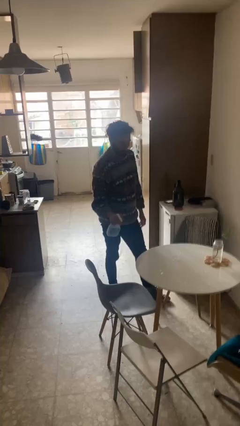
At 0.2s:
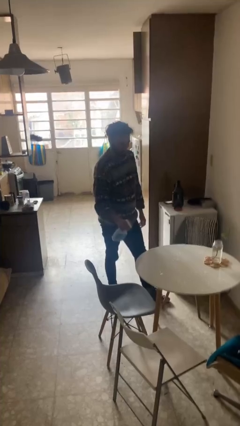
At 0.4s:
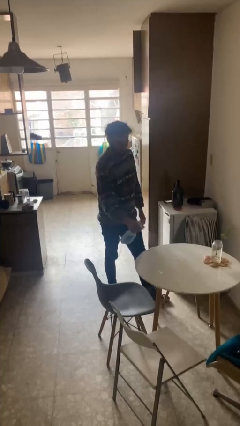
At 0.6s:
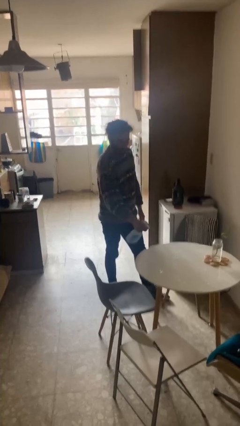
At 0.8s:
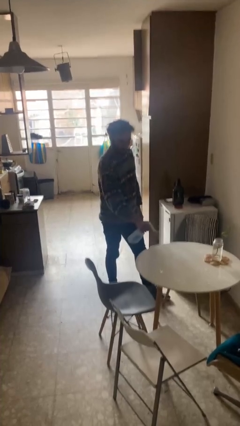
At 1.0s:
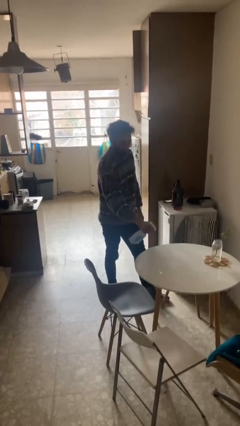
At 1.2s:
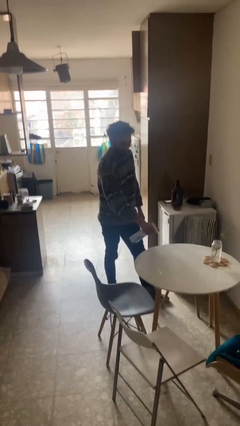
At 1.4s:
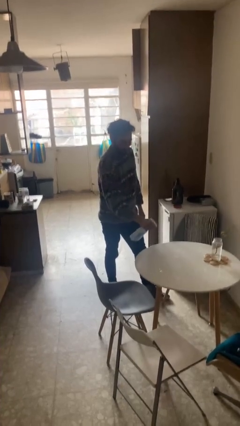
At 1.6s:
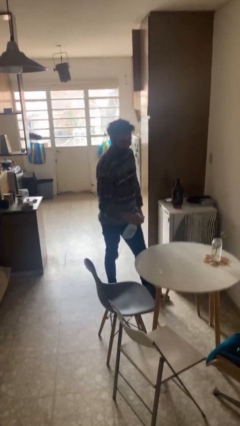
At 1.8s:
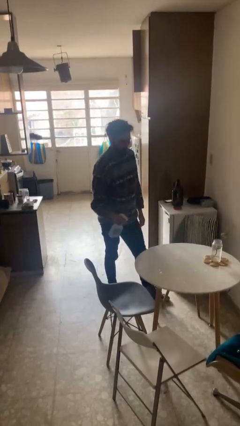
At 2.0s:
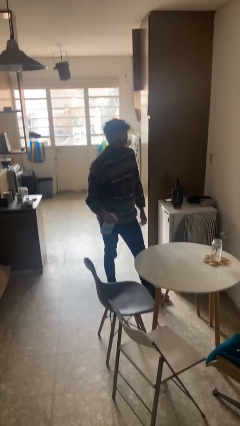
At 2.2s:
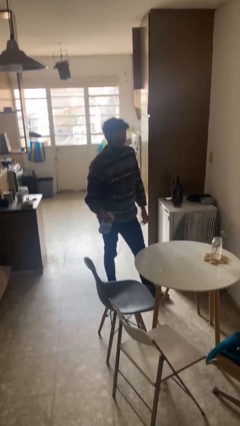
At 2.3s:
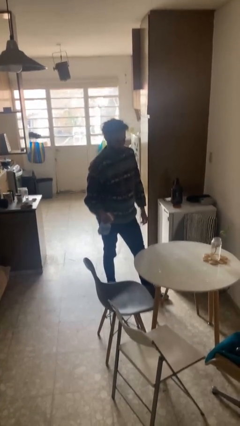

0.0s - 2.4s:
person sprays from bottle

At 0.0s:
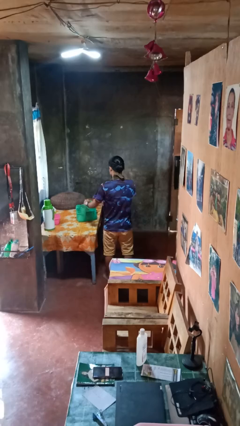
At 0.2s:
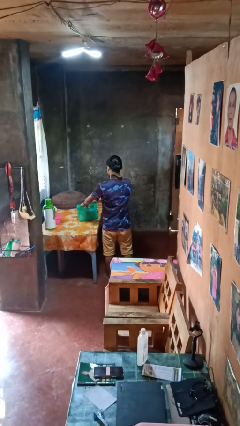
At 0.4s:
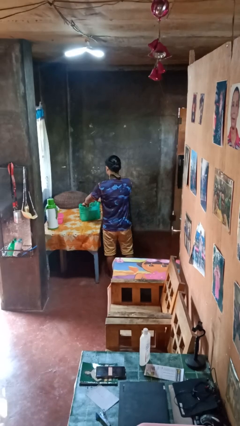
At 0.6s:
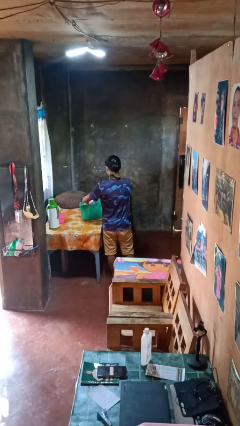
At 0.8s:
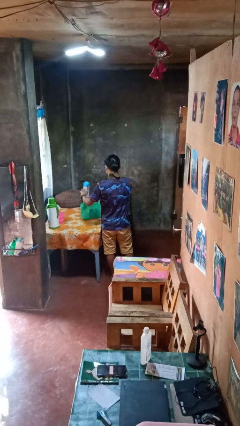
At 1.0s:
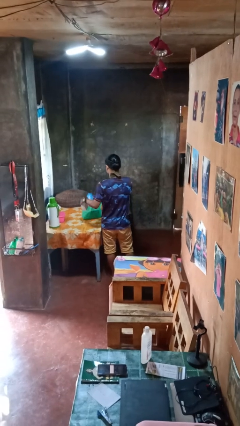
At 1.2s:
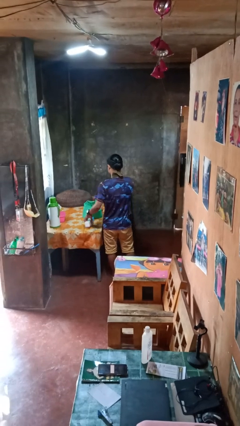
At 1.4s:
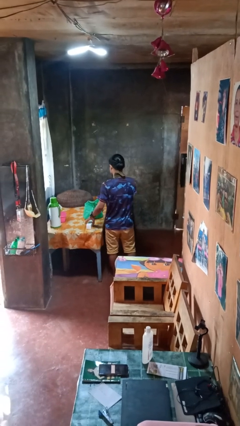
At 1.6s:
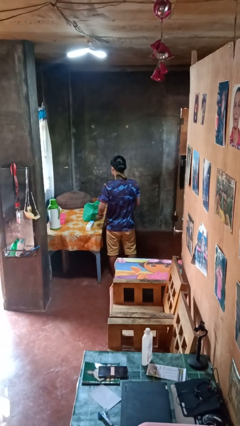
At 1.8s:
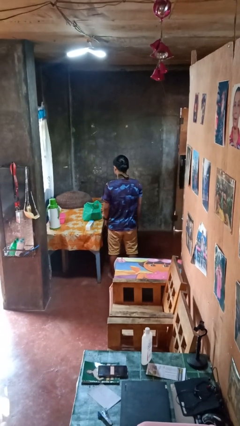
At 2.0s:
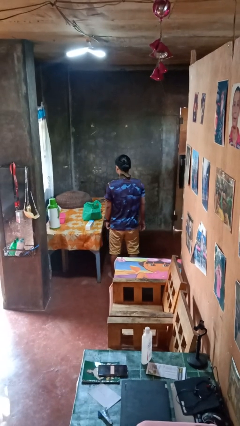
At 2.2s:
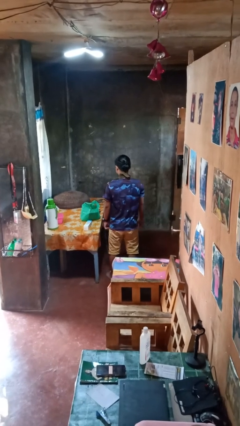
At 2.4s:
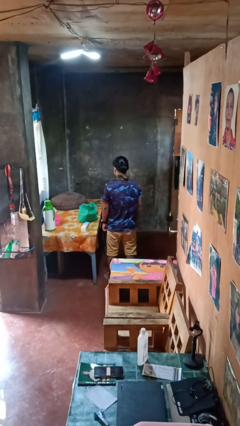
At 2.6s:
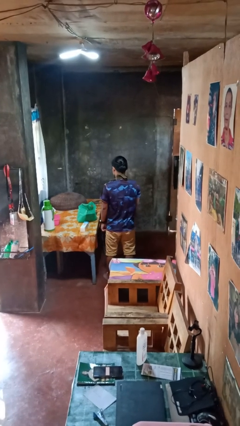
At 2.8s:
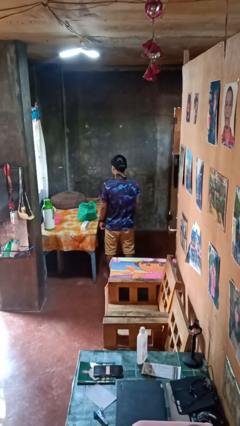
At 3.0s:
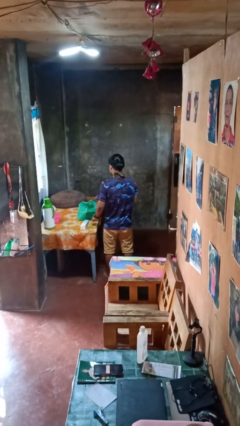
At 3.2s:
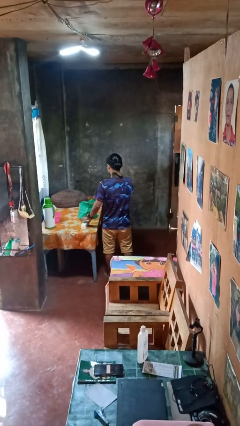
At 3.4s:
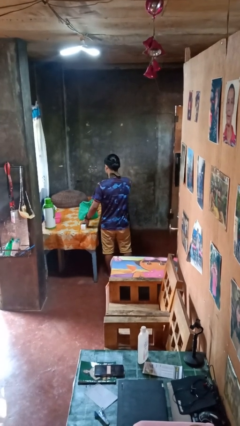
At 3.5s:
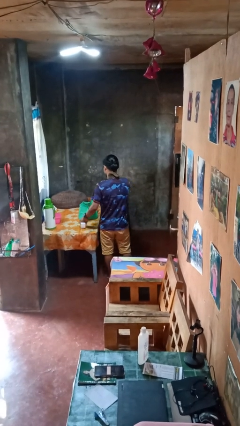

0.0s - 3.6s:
person takes object from bag

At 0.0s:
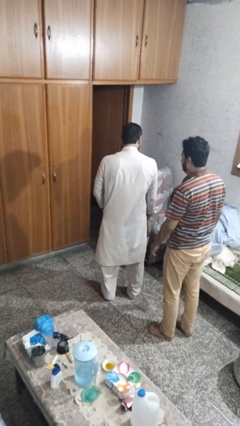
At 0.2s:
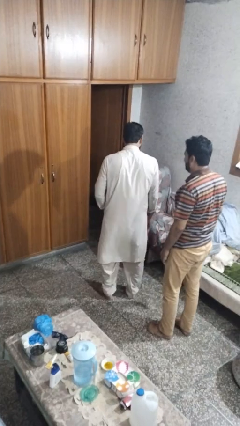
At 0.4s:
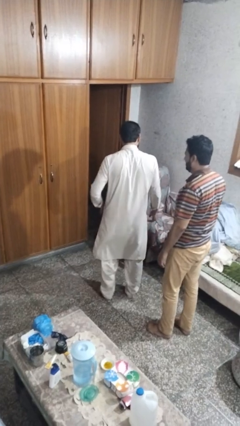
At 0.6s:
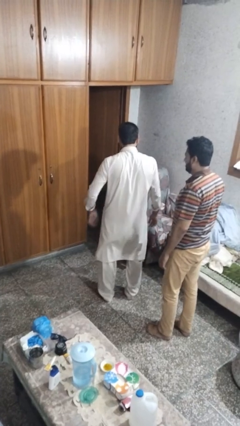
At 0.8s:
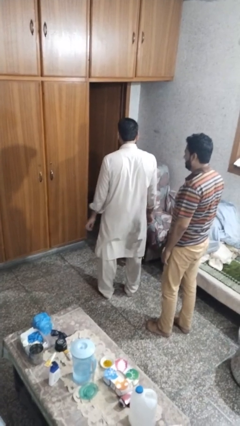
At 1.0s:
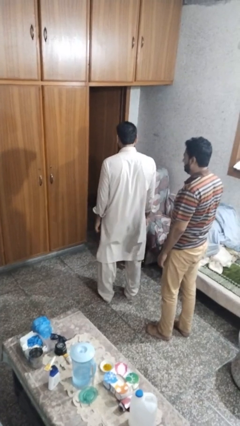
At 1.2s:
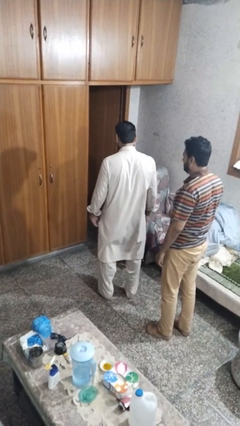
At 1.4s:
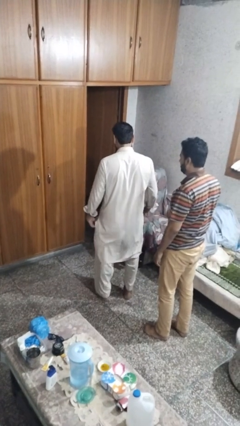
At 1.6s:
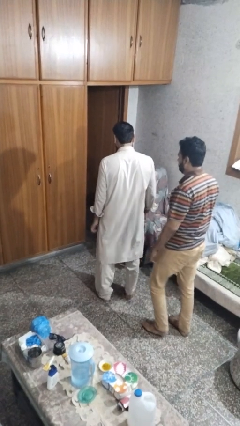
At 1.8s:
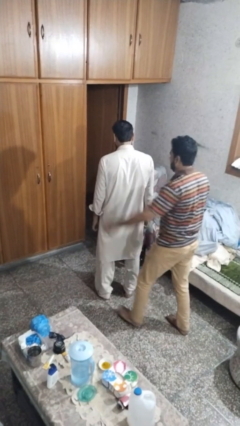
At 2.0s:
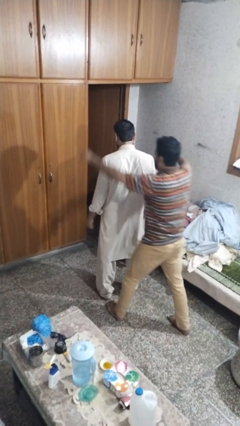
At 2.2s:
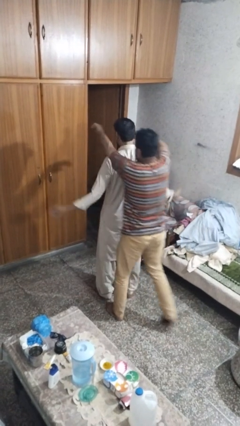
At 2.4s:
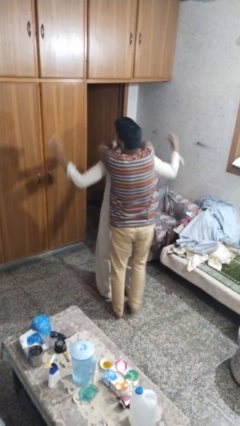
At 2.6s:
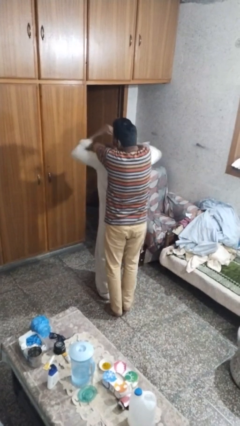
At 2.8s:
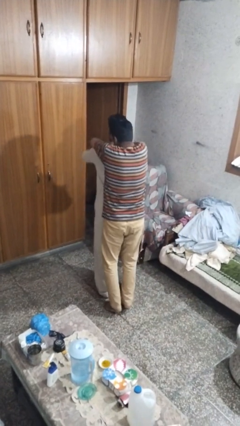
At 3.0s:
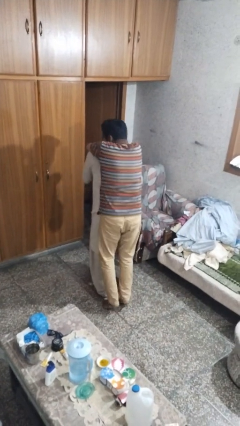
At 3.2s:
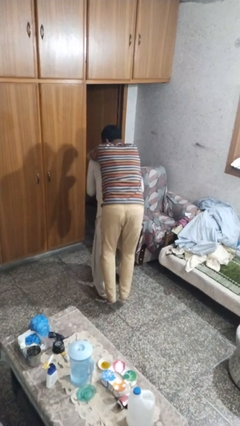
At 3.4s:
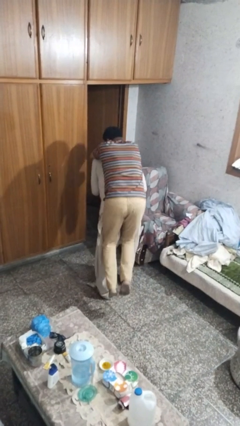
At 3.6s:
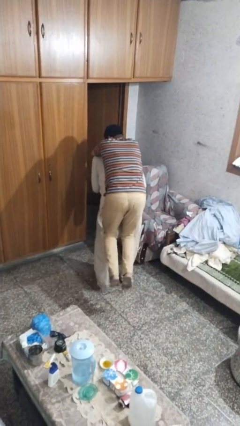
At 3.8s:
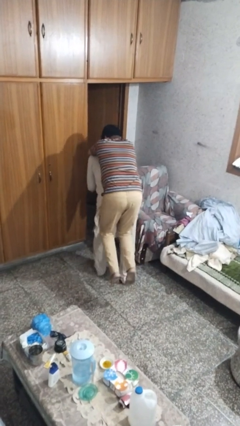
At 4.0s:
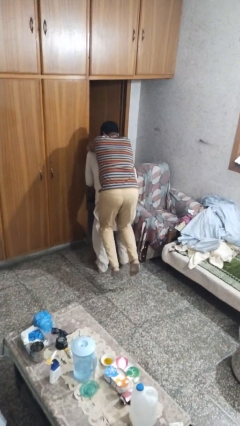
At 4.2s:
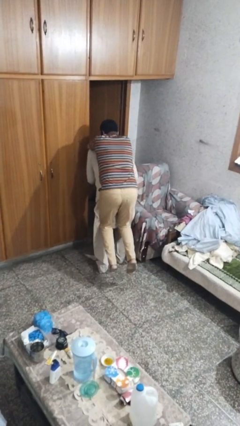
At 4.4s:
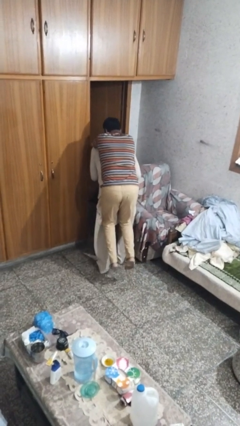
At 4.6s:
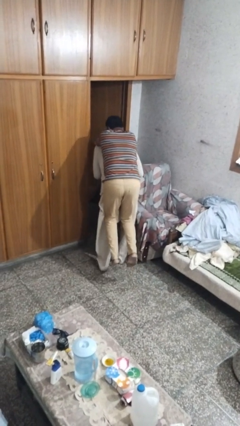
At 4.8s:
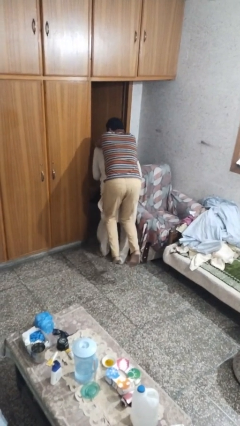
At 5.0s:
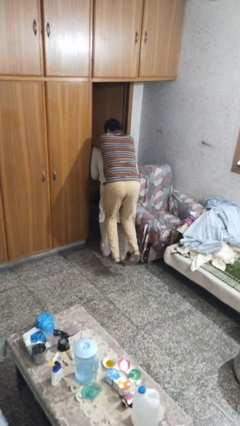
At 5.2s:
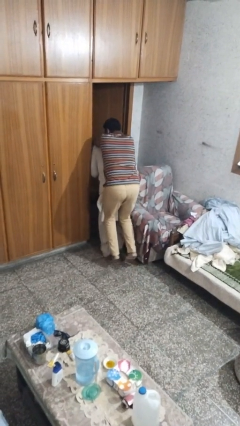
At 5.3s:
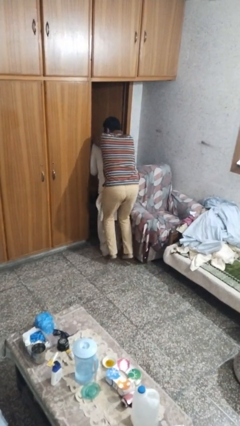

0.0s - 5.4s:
person carries person on back

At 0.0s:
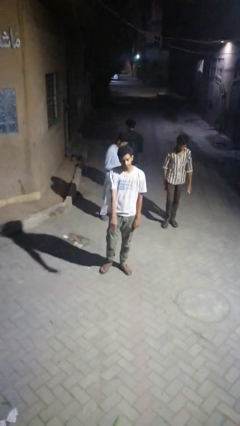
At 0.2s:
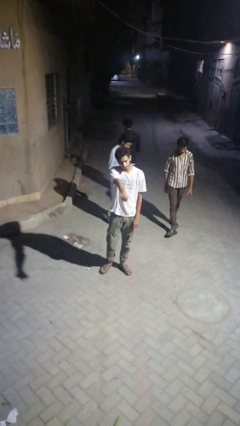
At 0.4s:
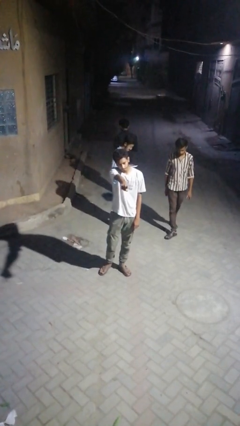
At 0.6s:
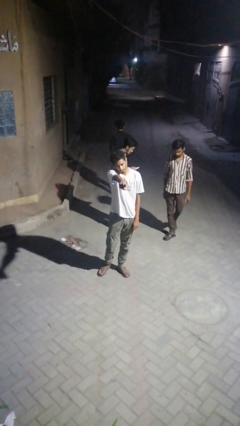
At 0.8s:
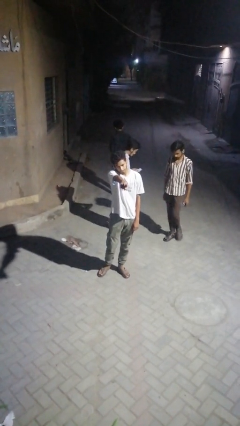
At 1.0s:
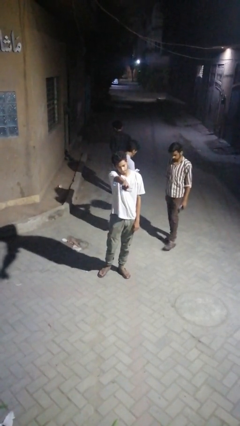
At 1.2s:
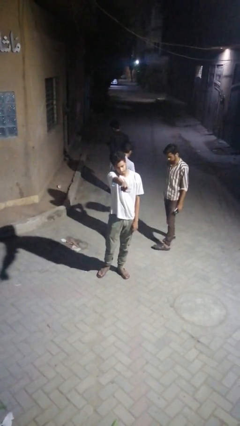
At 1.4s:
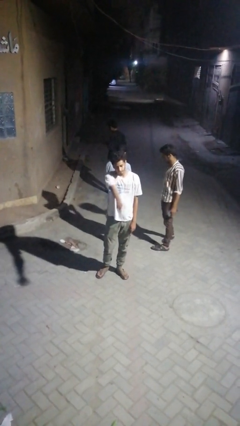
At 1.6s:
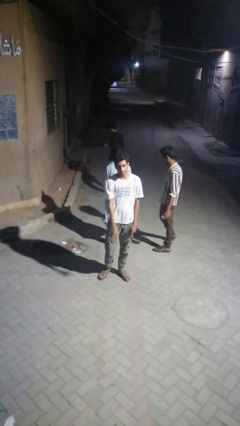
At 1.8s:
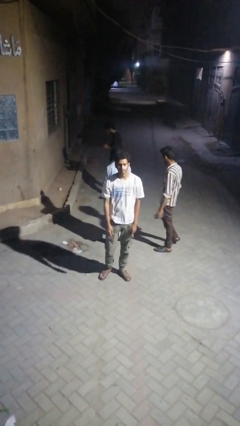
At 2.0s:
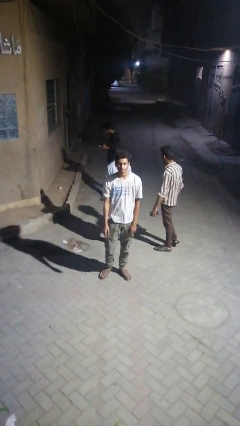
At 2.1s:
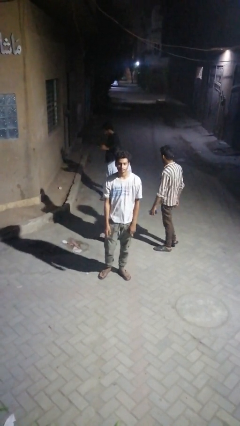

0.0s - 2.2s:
person points at person

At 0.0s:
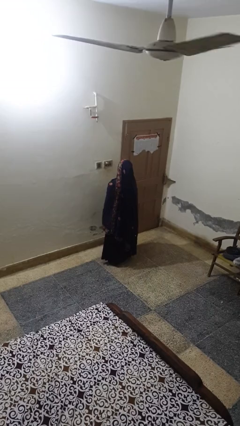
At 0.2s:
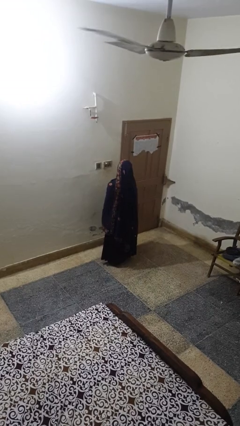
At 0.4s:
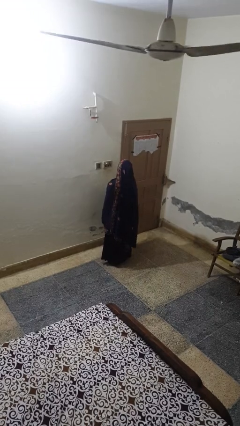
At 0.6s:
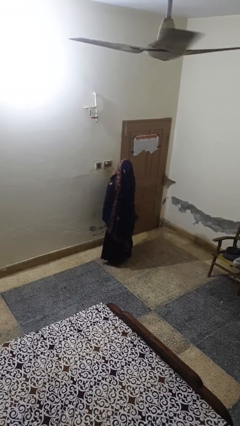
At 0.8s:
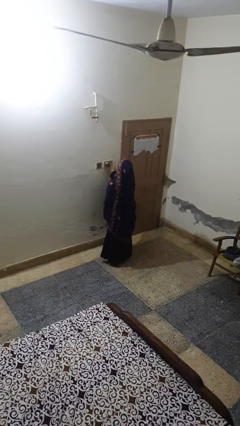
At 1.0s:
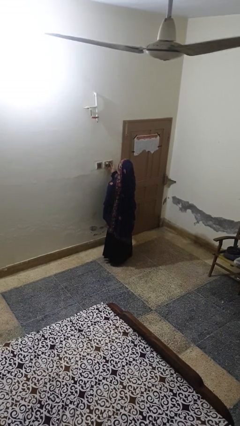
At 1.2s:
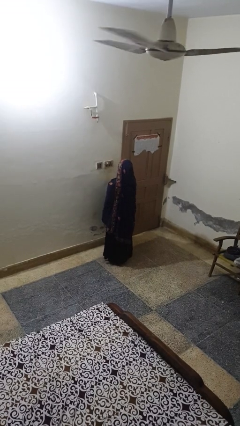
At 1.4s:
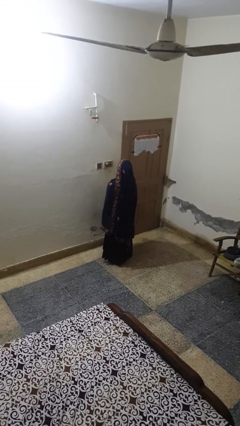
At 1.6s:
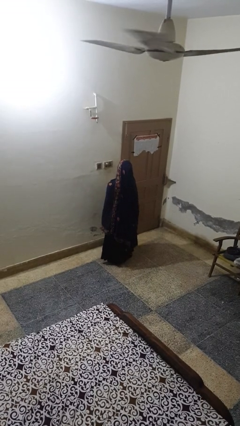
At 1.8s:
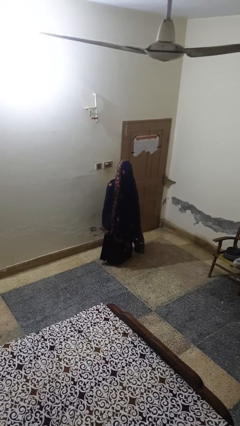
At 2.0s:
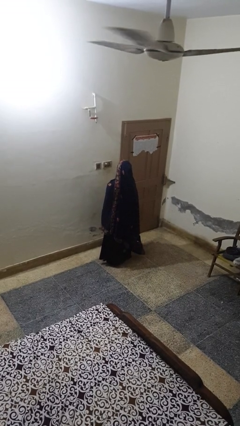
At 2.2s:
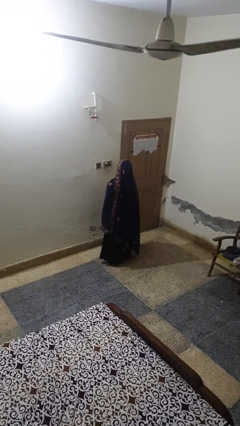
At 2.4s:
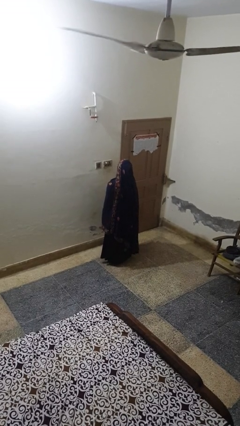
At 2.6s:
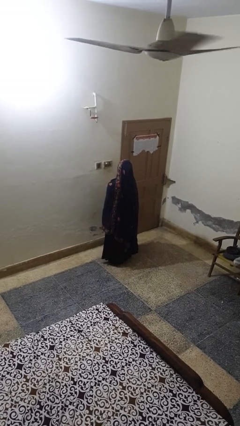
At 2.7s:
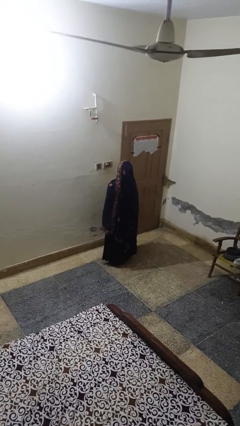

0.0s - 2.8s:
person turns on fan

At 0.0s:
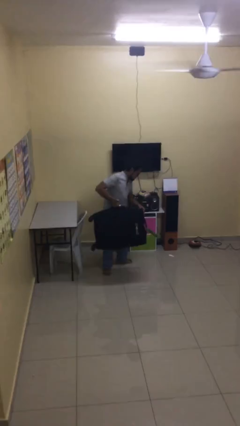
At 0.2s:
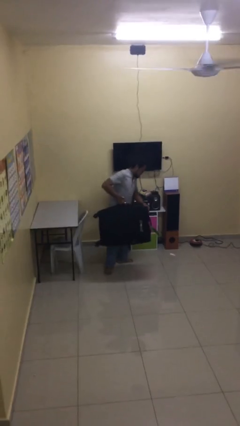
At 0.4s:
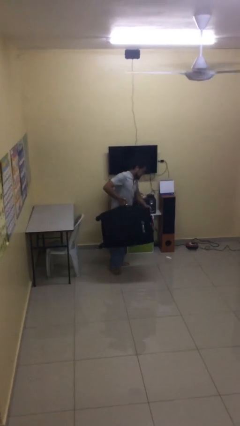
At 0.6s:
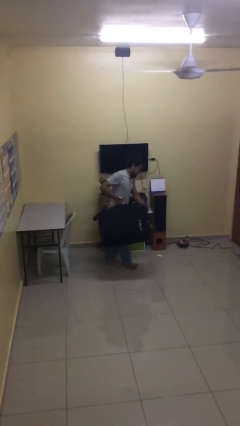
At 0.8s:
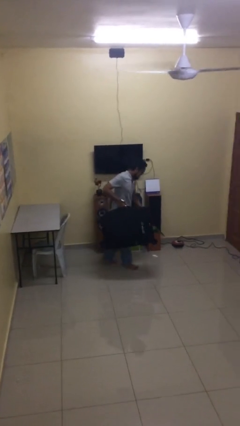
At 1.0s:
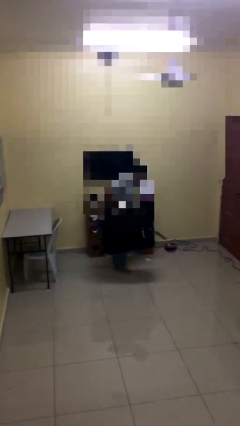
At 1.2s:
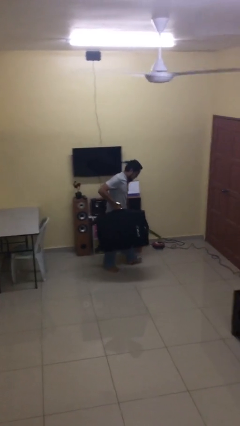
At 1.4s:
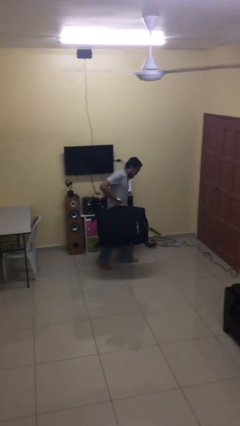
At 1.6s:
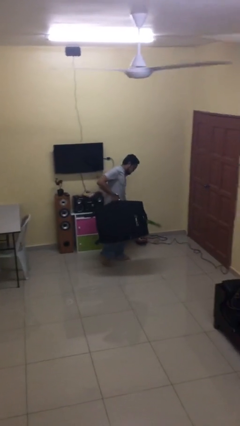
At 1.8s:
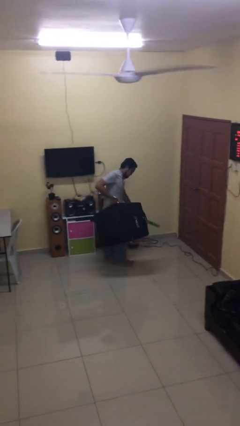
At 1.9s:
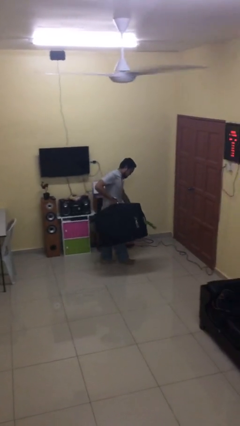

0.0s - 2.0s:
person carries heavy object
